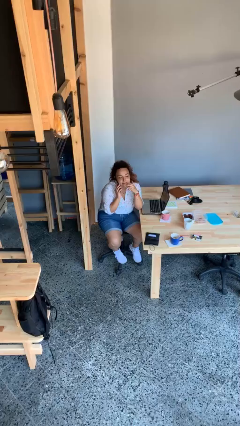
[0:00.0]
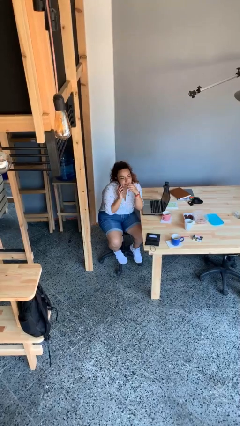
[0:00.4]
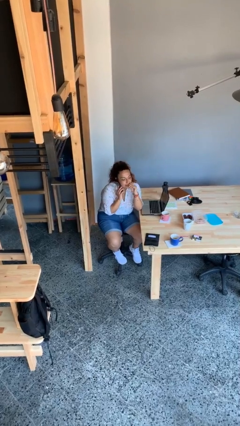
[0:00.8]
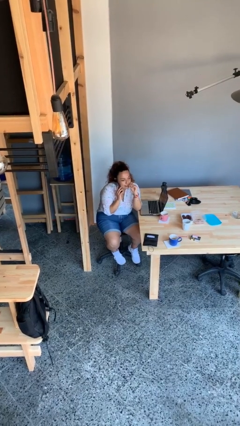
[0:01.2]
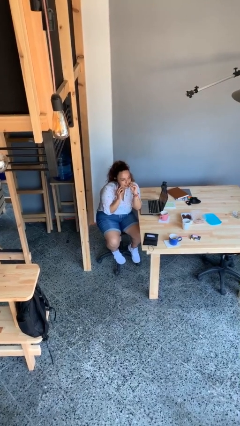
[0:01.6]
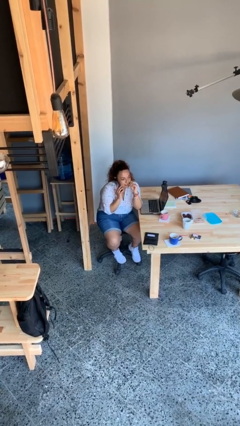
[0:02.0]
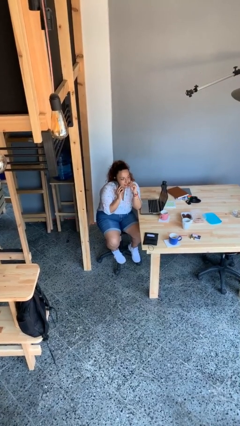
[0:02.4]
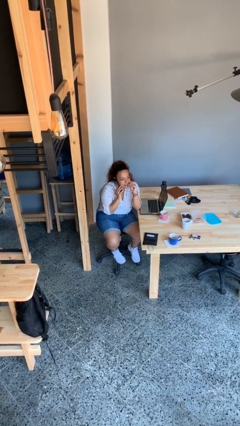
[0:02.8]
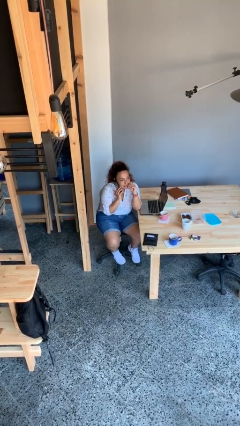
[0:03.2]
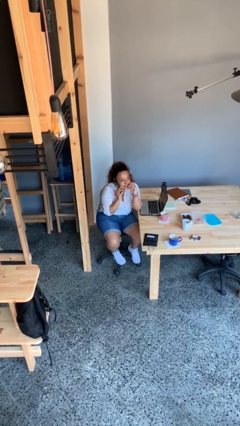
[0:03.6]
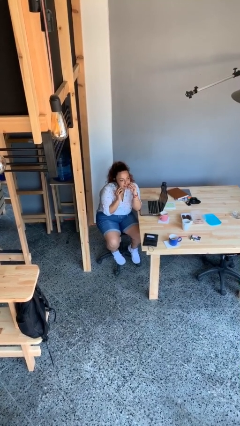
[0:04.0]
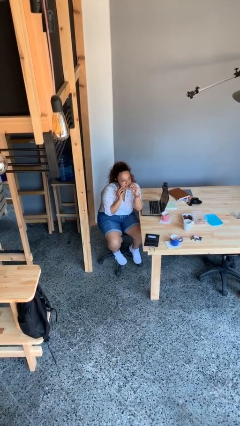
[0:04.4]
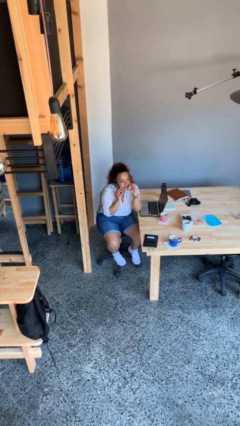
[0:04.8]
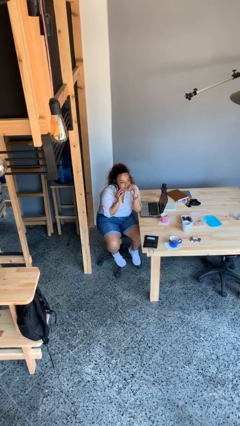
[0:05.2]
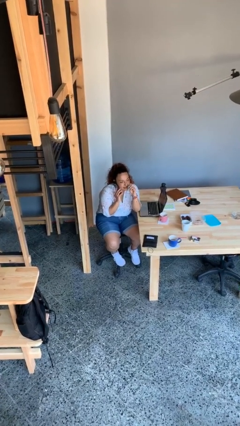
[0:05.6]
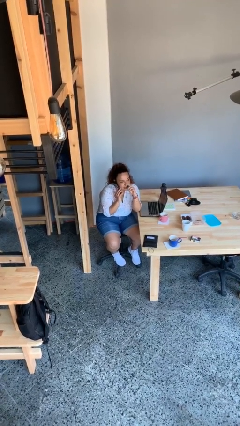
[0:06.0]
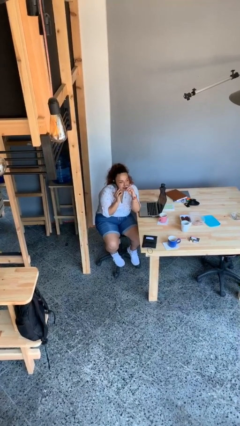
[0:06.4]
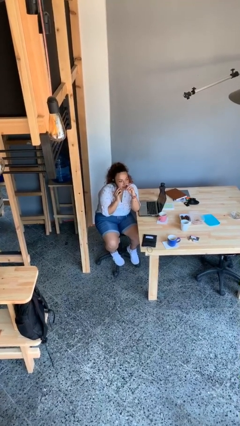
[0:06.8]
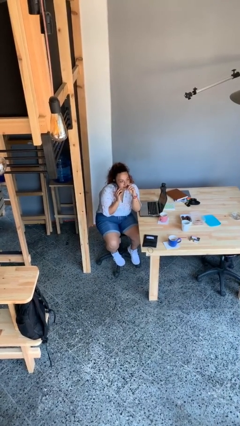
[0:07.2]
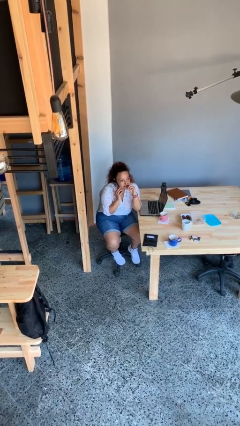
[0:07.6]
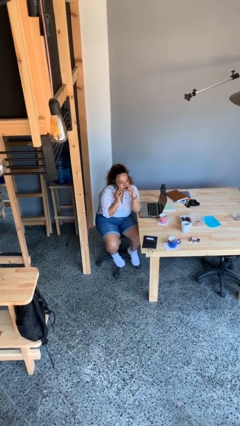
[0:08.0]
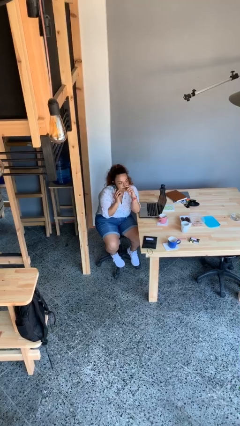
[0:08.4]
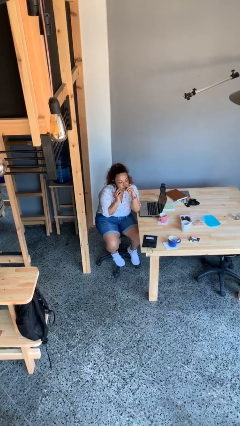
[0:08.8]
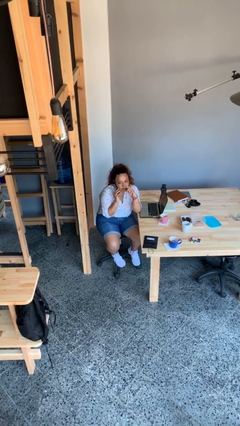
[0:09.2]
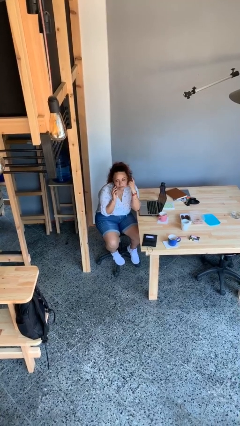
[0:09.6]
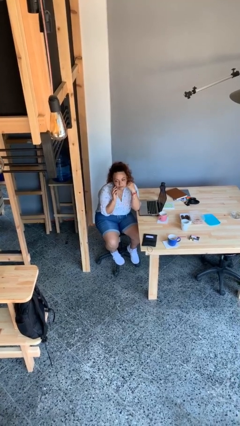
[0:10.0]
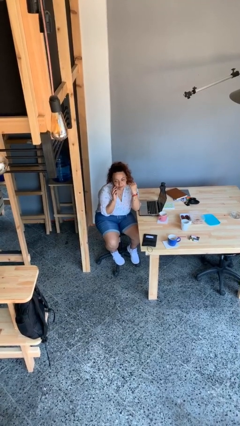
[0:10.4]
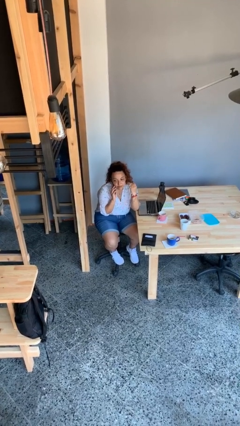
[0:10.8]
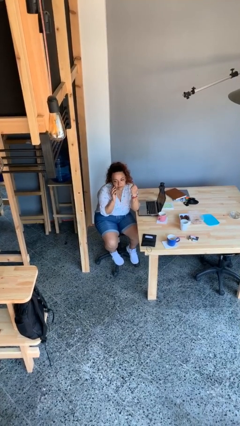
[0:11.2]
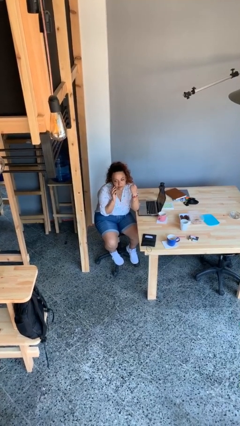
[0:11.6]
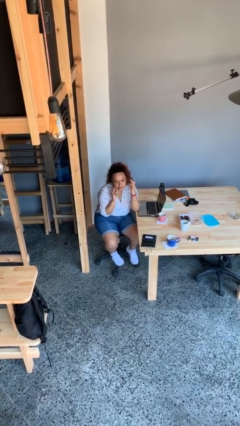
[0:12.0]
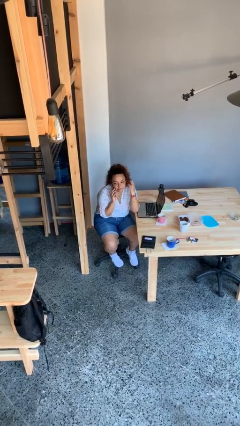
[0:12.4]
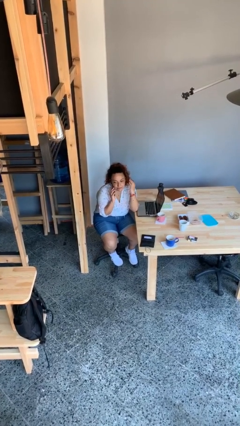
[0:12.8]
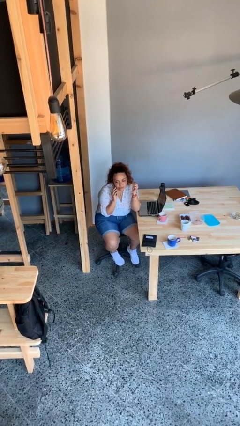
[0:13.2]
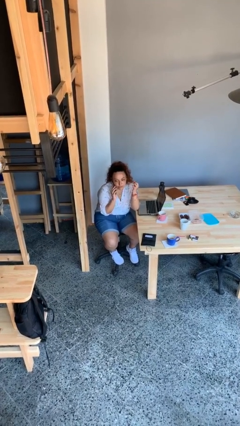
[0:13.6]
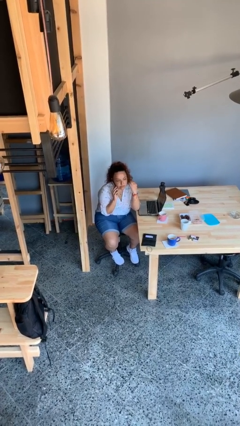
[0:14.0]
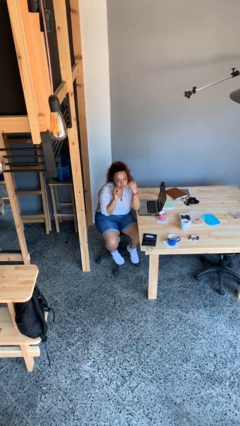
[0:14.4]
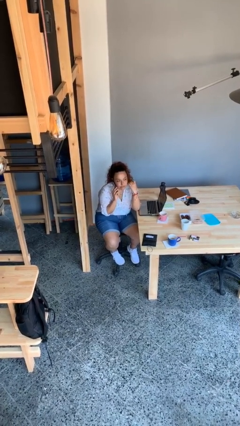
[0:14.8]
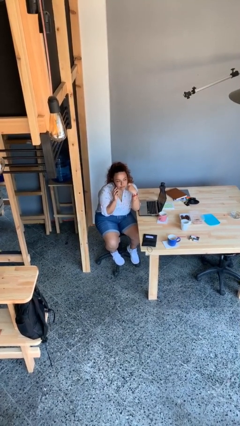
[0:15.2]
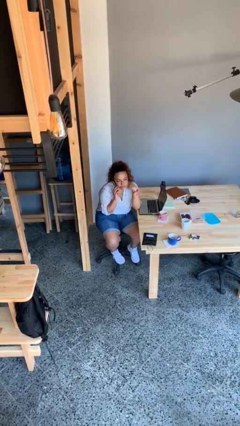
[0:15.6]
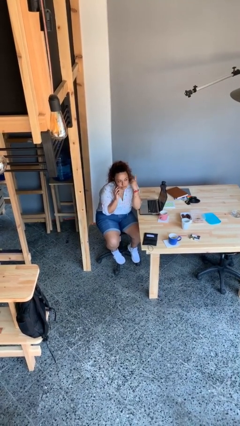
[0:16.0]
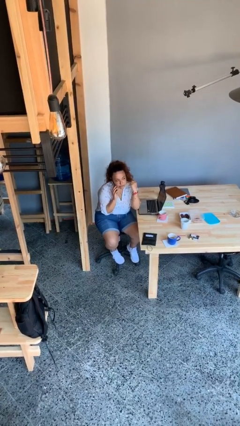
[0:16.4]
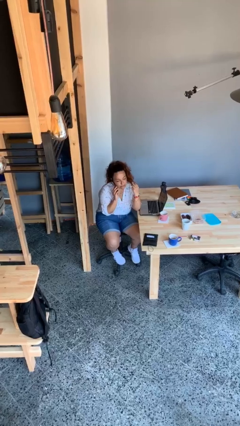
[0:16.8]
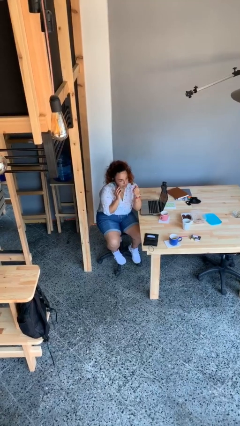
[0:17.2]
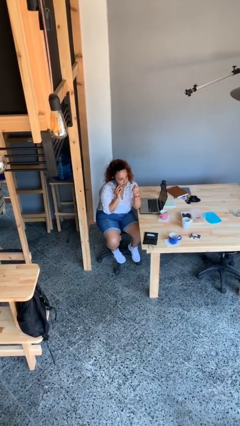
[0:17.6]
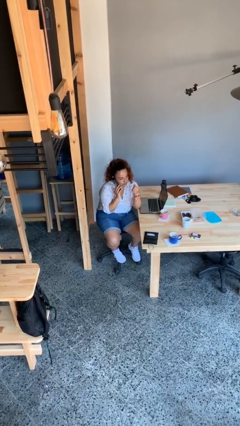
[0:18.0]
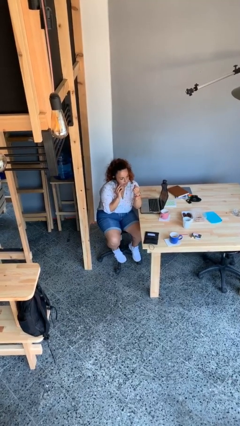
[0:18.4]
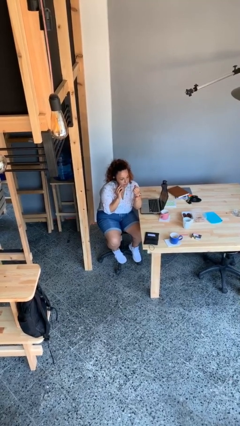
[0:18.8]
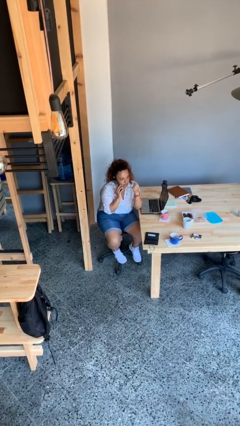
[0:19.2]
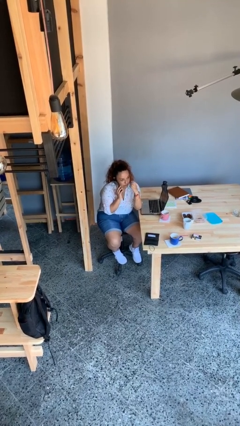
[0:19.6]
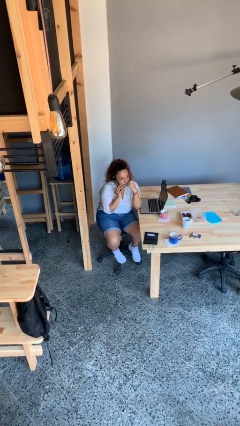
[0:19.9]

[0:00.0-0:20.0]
person talks on phone

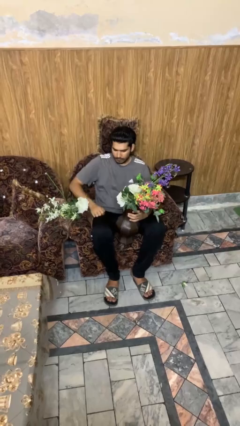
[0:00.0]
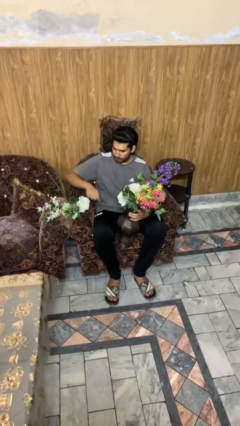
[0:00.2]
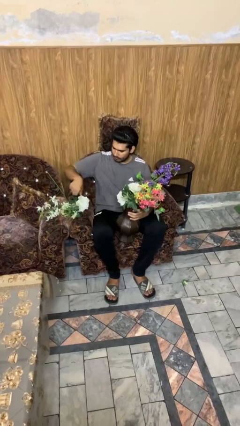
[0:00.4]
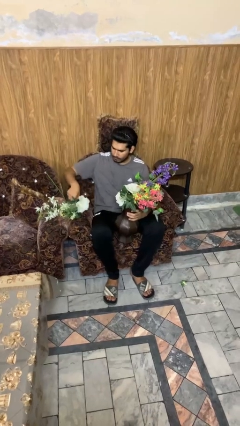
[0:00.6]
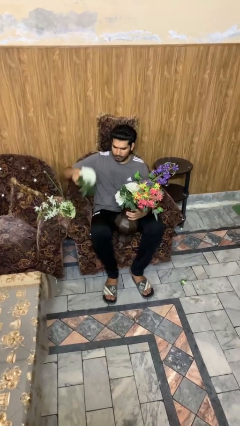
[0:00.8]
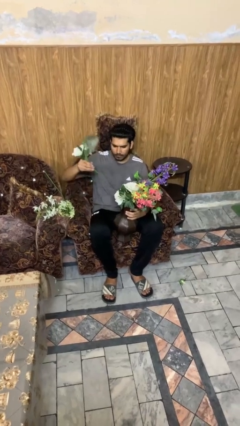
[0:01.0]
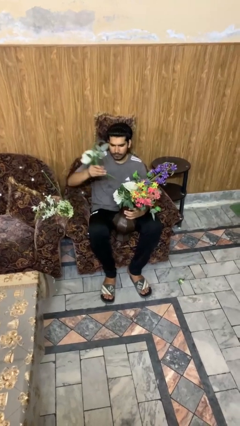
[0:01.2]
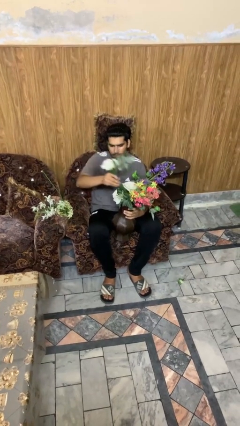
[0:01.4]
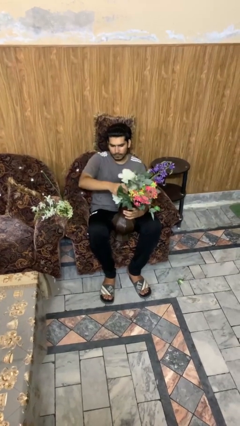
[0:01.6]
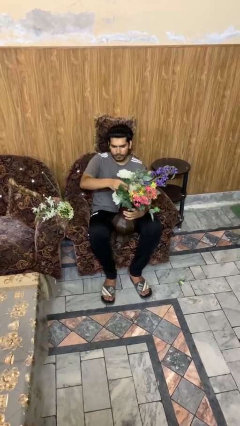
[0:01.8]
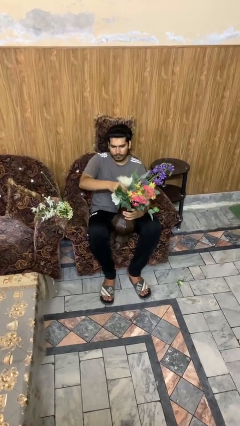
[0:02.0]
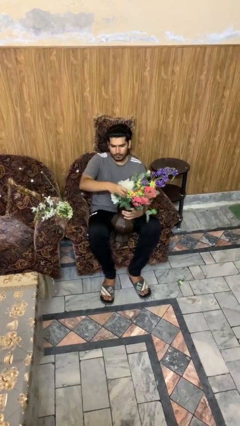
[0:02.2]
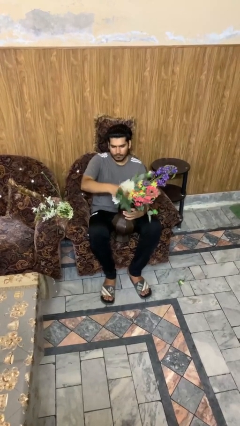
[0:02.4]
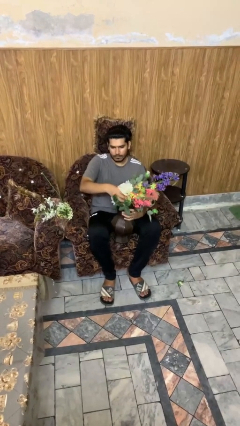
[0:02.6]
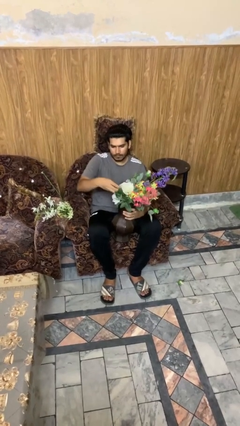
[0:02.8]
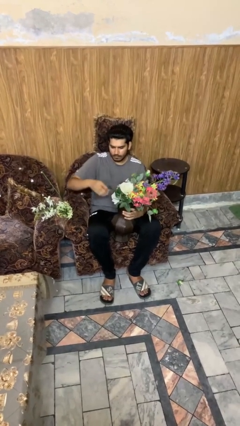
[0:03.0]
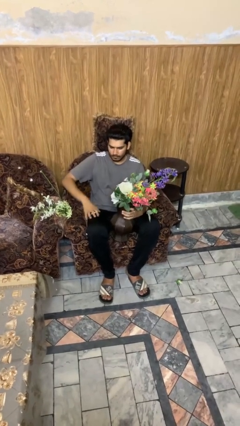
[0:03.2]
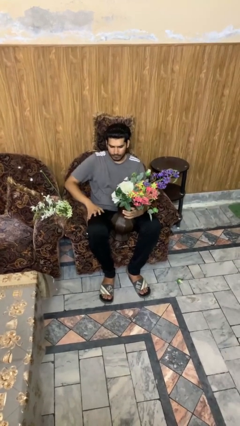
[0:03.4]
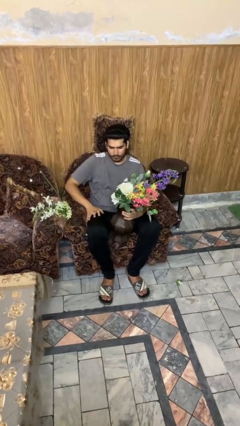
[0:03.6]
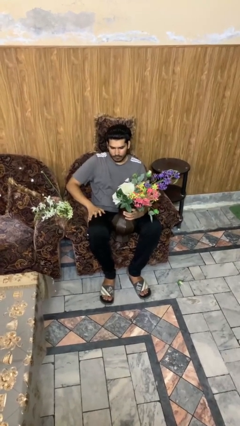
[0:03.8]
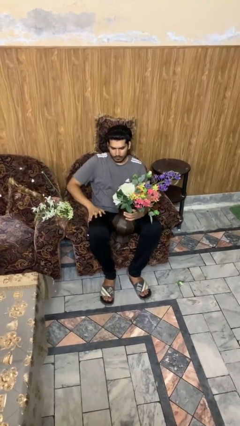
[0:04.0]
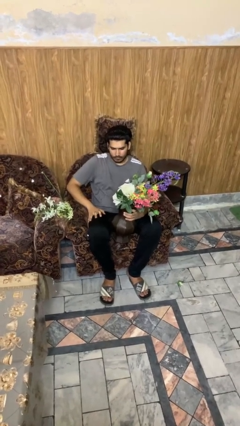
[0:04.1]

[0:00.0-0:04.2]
person arranges flowers in vase

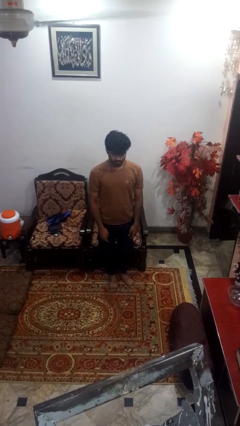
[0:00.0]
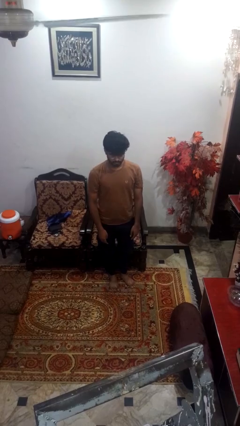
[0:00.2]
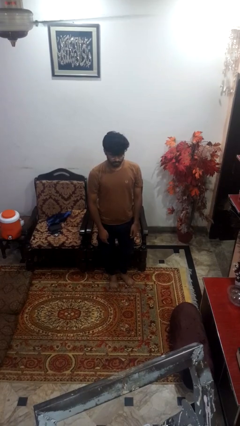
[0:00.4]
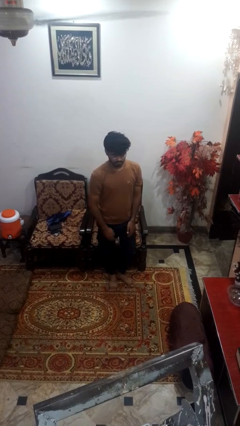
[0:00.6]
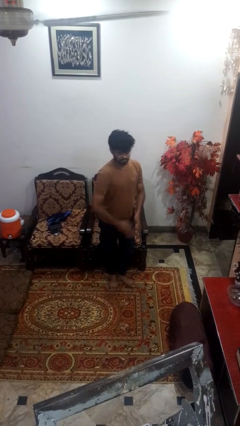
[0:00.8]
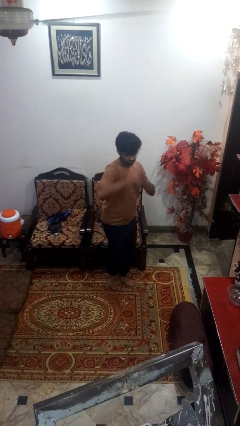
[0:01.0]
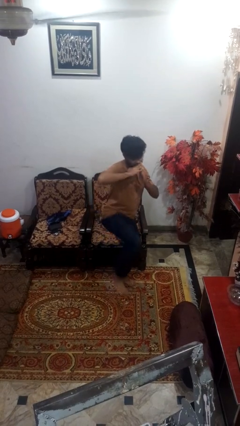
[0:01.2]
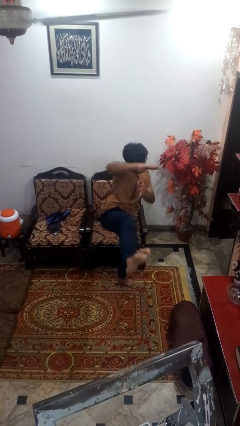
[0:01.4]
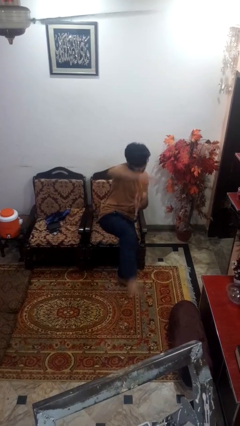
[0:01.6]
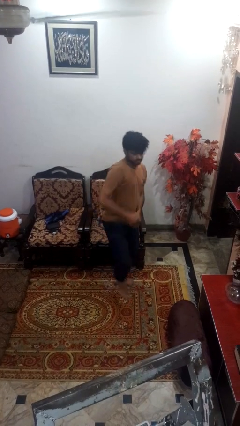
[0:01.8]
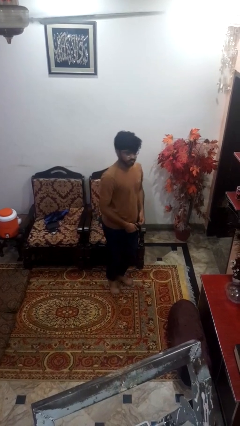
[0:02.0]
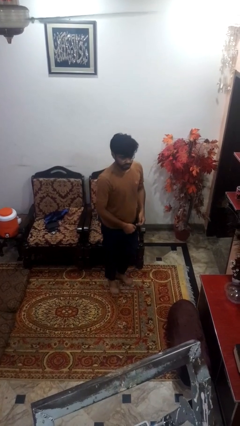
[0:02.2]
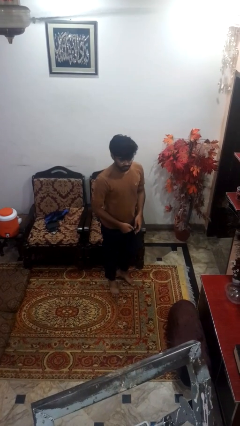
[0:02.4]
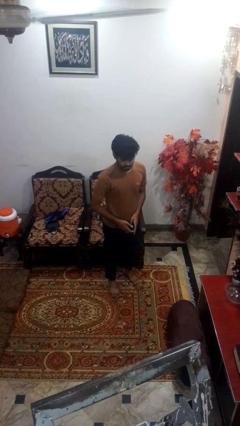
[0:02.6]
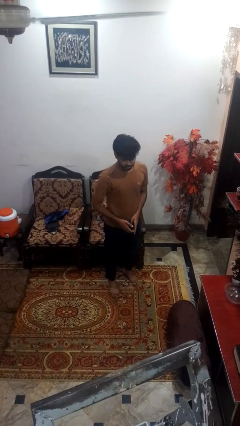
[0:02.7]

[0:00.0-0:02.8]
person karate kicks

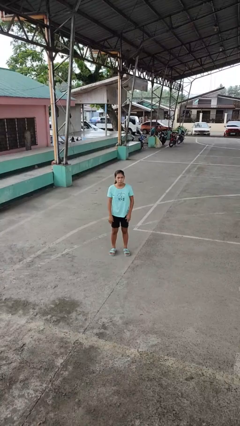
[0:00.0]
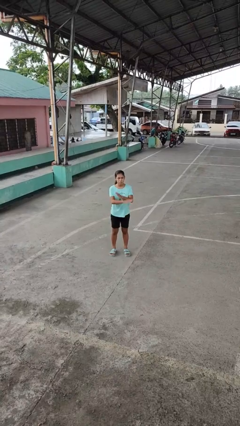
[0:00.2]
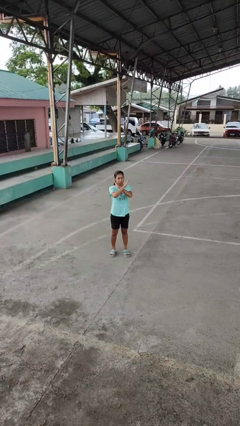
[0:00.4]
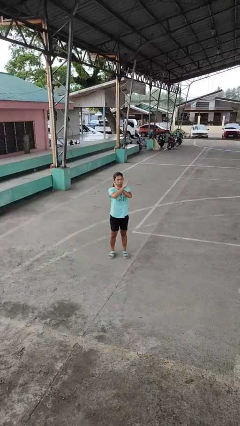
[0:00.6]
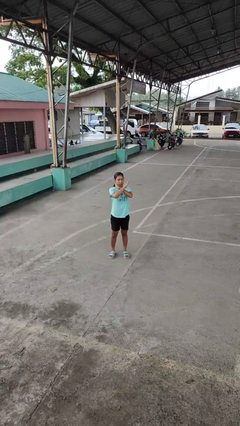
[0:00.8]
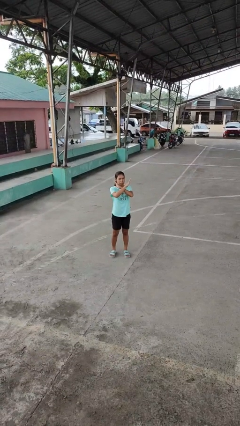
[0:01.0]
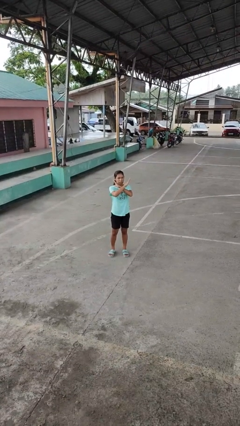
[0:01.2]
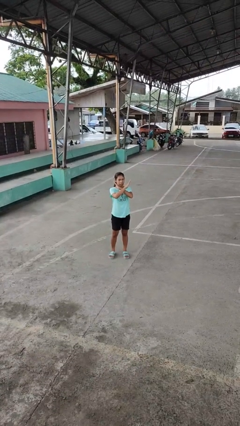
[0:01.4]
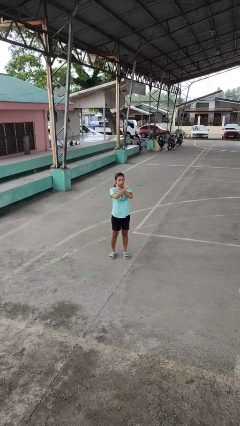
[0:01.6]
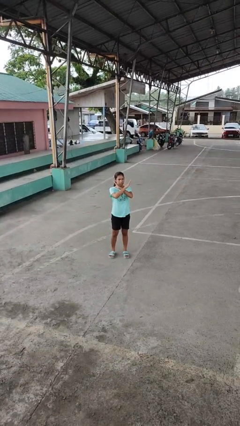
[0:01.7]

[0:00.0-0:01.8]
person gestures arms x
